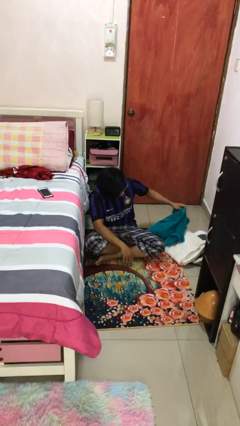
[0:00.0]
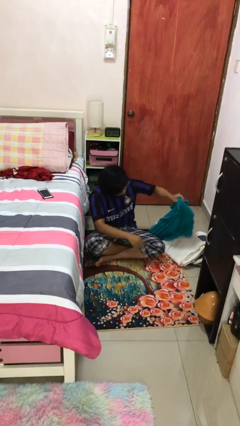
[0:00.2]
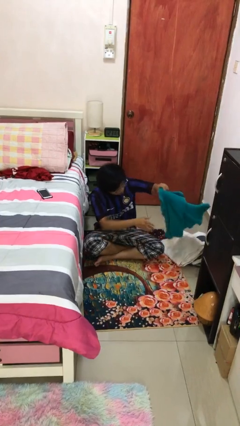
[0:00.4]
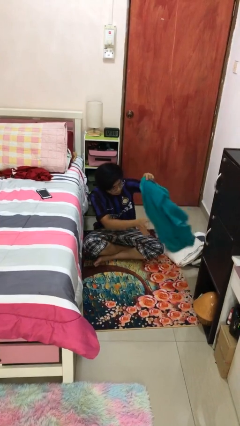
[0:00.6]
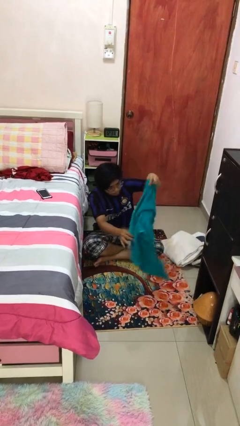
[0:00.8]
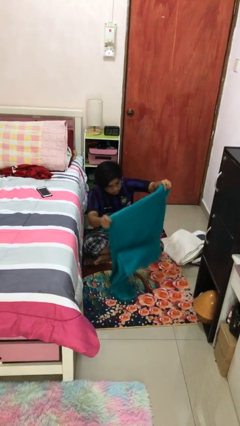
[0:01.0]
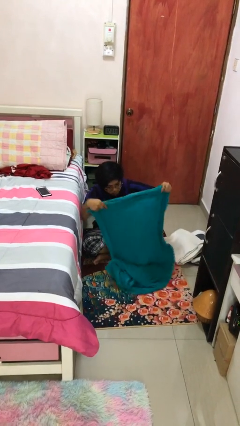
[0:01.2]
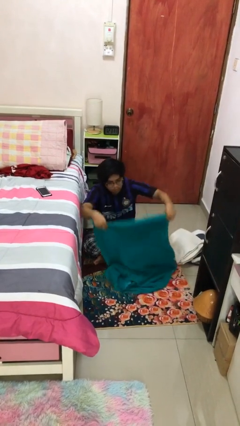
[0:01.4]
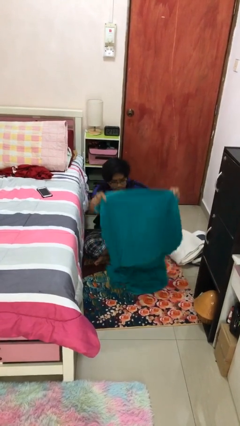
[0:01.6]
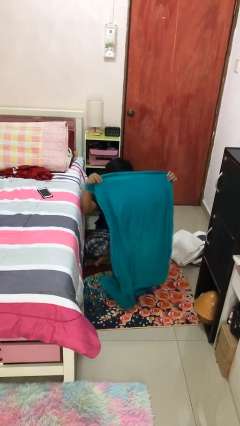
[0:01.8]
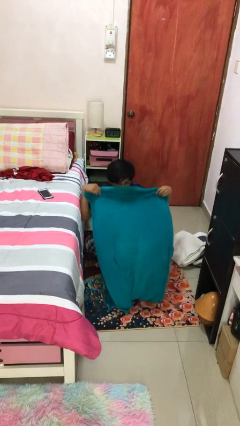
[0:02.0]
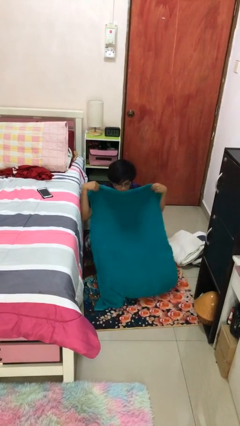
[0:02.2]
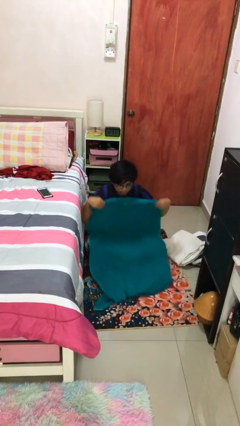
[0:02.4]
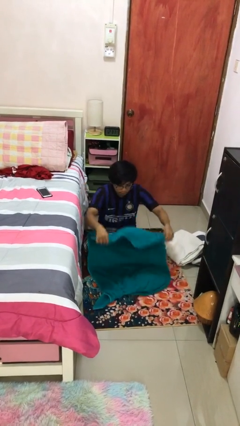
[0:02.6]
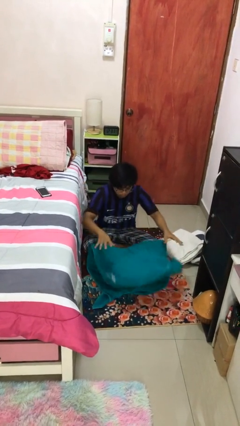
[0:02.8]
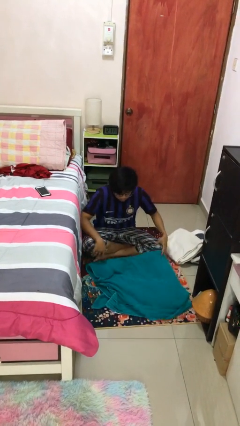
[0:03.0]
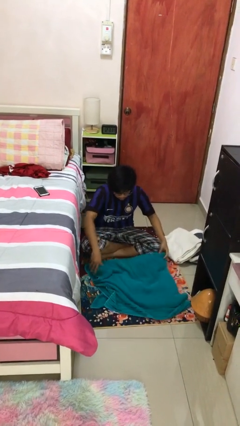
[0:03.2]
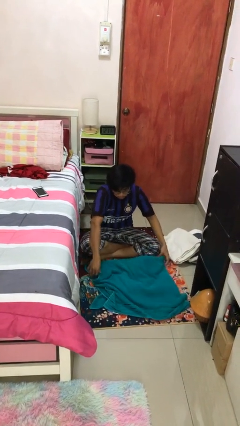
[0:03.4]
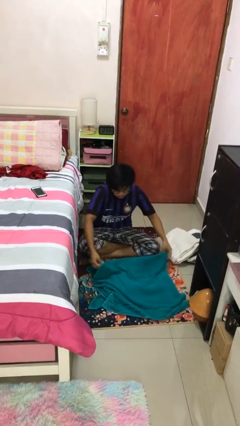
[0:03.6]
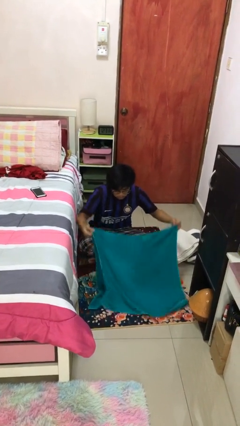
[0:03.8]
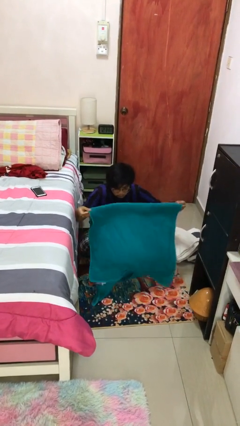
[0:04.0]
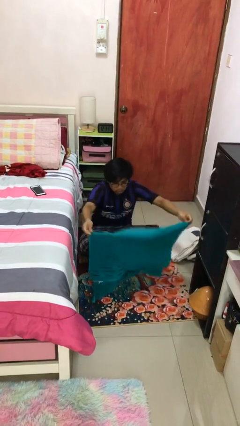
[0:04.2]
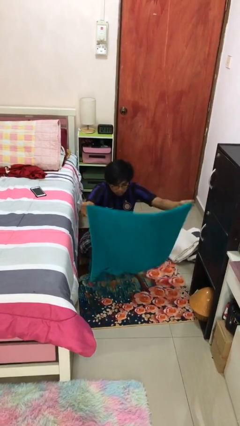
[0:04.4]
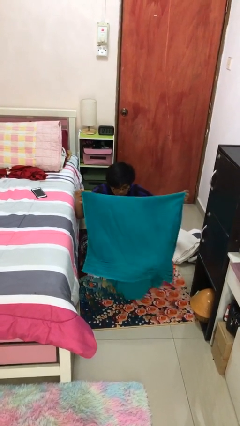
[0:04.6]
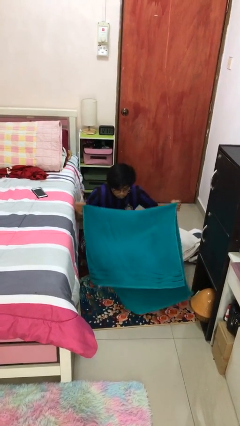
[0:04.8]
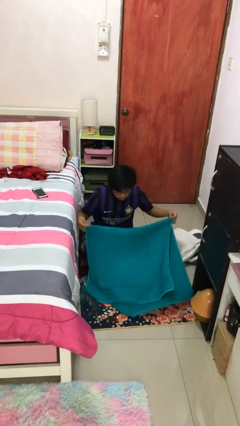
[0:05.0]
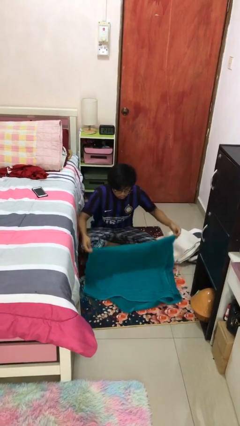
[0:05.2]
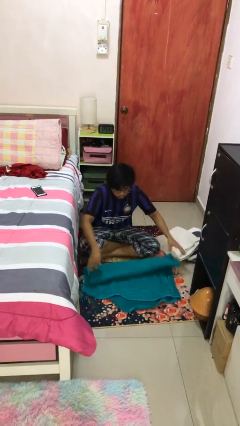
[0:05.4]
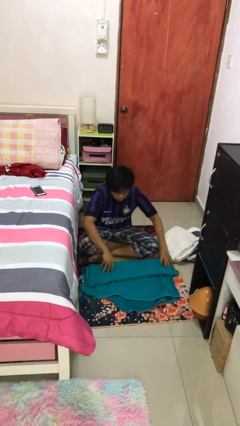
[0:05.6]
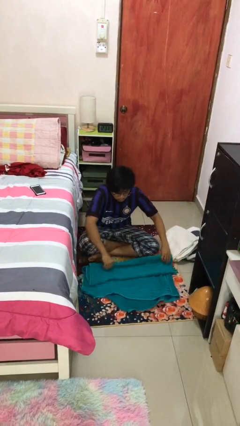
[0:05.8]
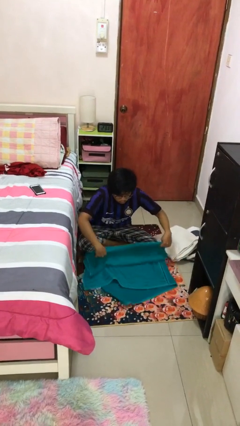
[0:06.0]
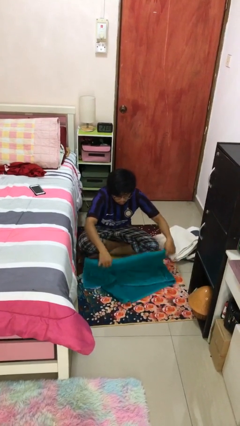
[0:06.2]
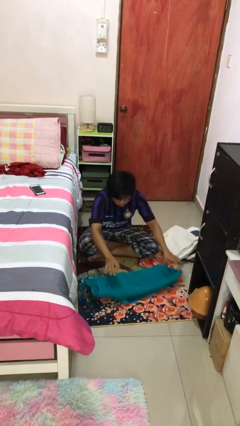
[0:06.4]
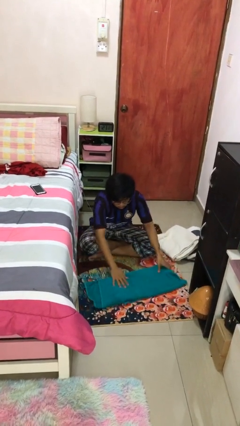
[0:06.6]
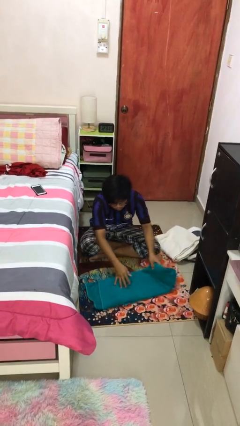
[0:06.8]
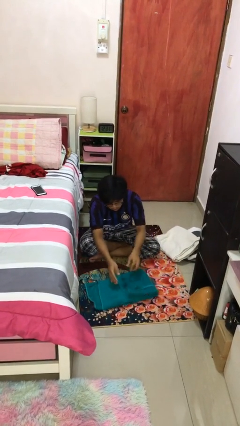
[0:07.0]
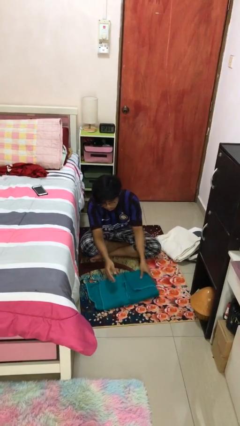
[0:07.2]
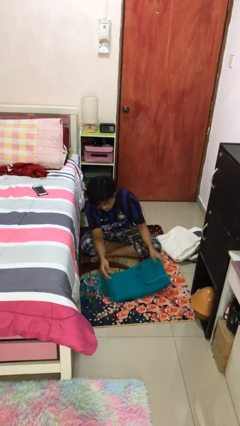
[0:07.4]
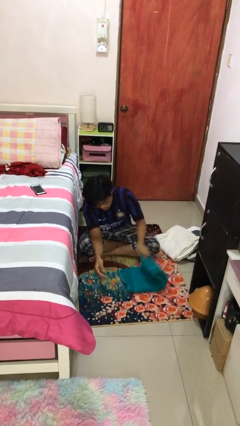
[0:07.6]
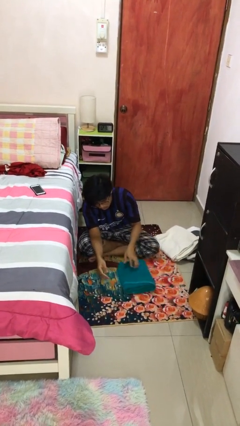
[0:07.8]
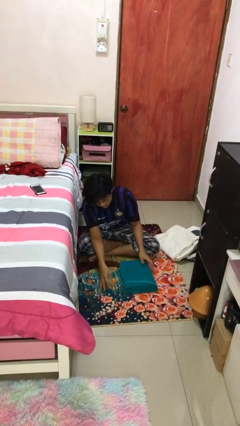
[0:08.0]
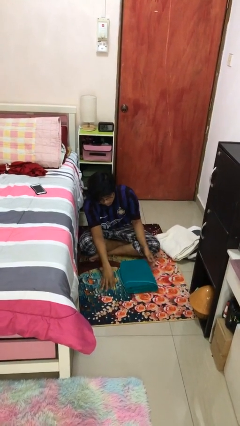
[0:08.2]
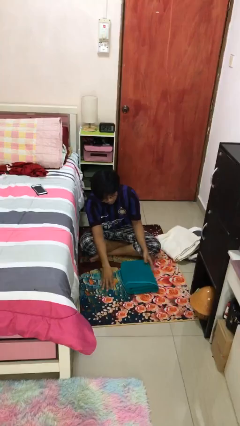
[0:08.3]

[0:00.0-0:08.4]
person folds towel

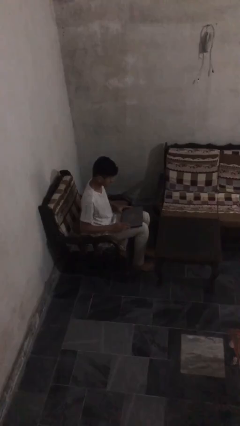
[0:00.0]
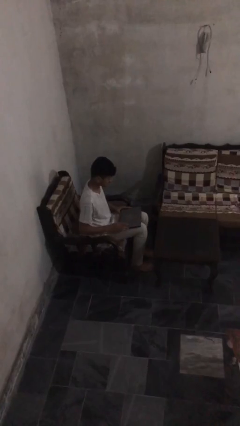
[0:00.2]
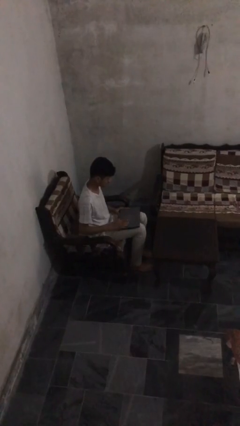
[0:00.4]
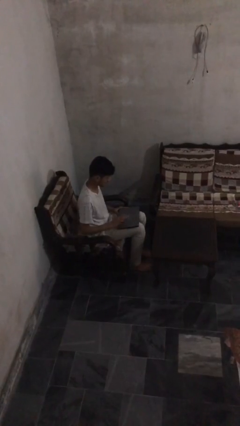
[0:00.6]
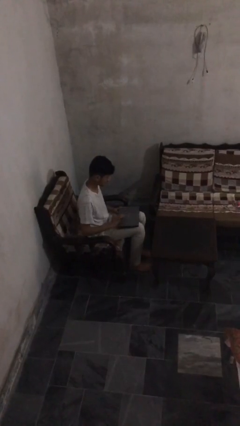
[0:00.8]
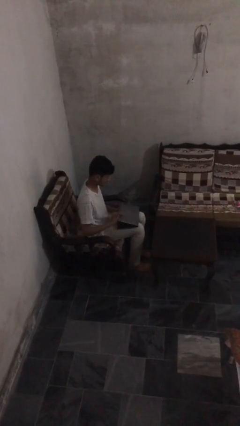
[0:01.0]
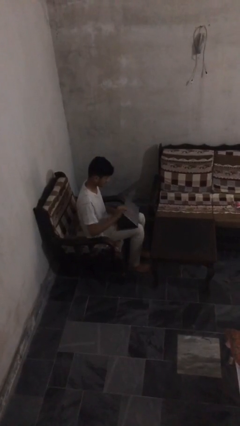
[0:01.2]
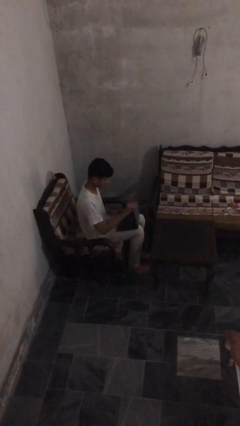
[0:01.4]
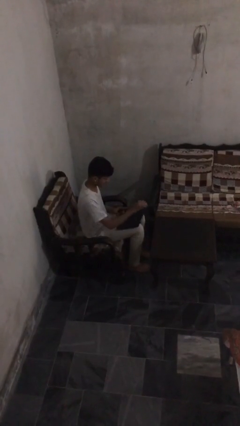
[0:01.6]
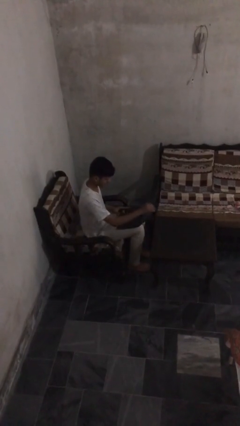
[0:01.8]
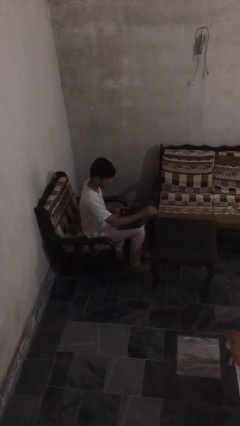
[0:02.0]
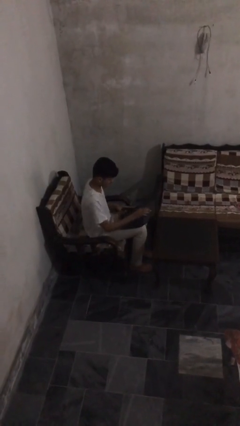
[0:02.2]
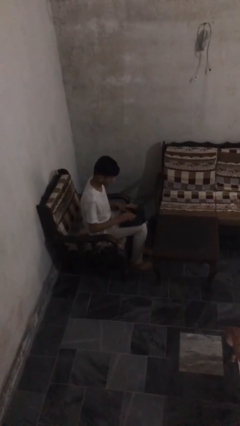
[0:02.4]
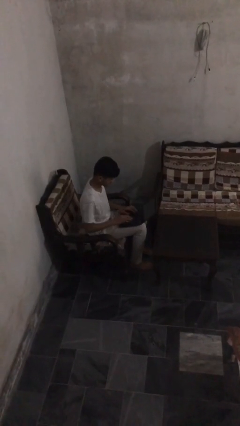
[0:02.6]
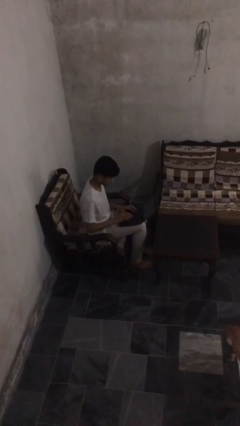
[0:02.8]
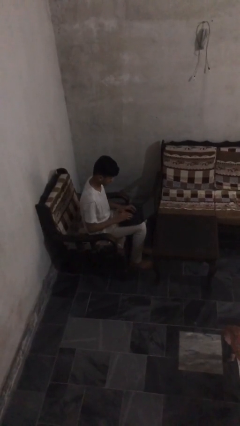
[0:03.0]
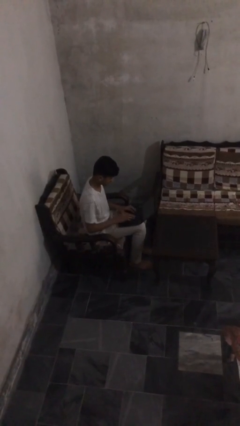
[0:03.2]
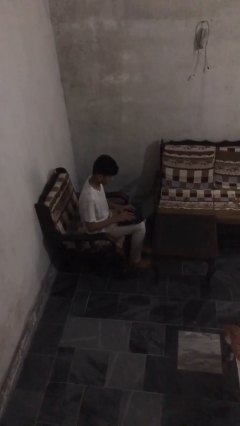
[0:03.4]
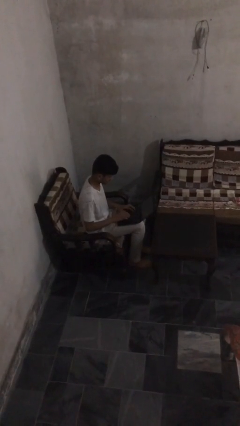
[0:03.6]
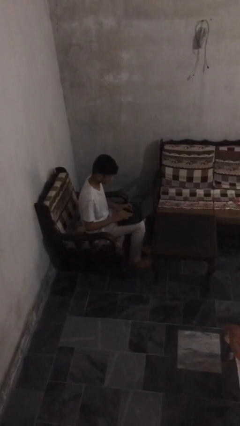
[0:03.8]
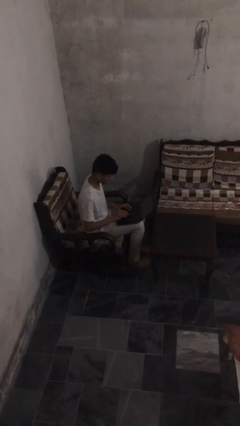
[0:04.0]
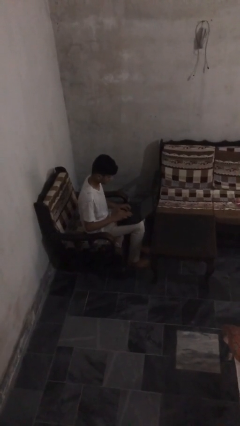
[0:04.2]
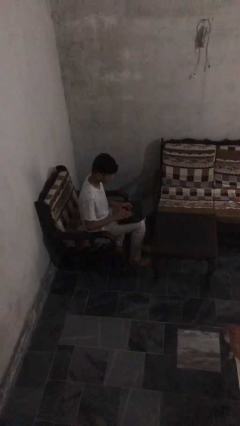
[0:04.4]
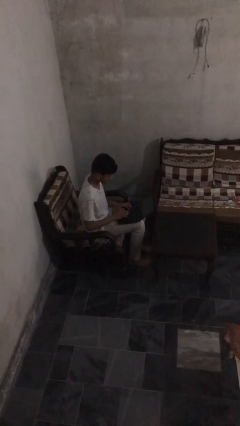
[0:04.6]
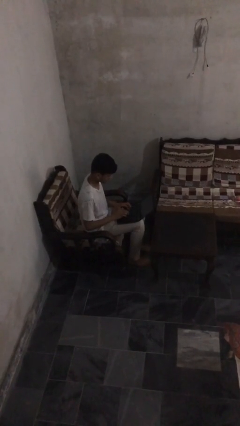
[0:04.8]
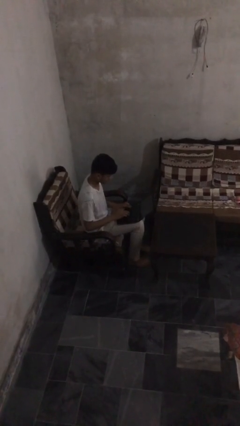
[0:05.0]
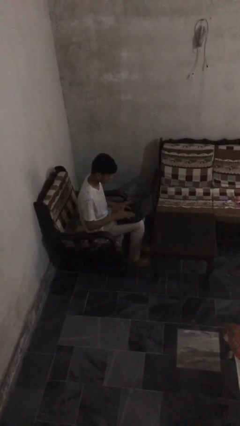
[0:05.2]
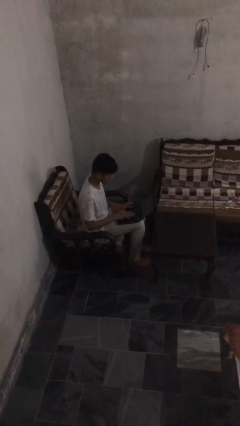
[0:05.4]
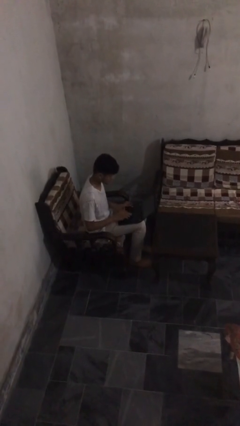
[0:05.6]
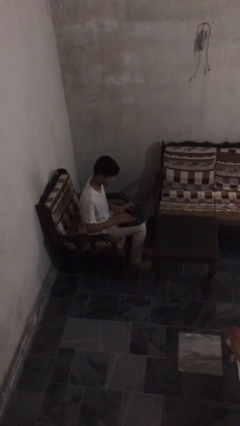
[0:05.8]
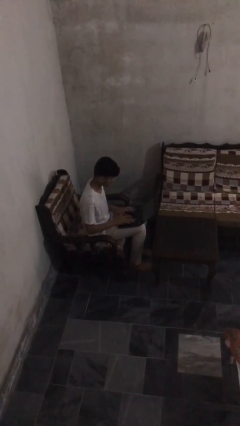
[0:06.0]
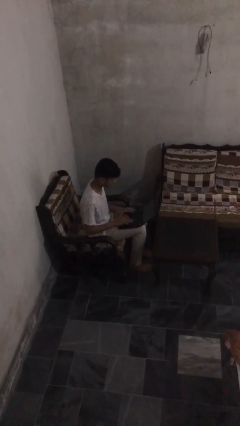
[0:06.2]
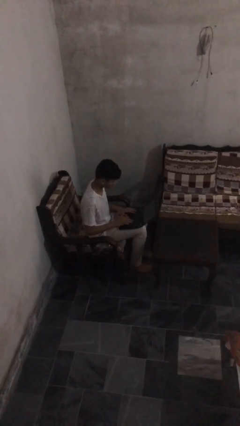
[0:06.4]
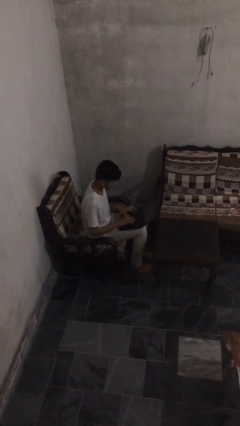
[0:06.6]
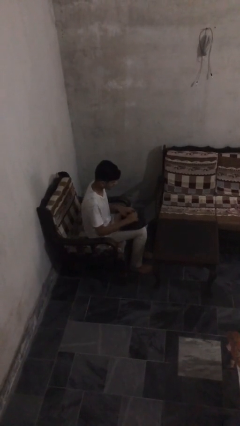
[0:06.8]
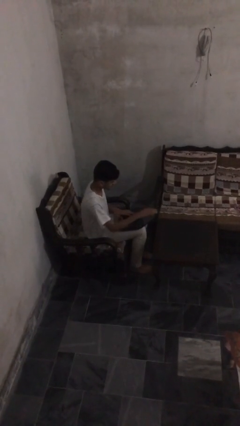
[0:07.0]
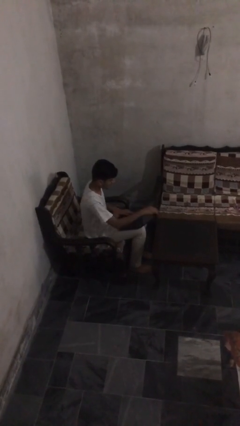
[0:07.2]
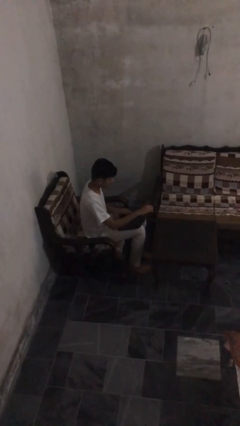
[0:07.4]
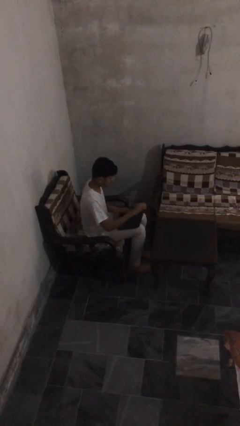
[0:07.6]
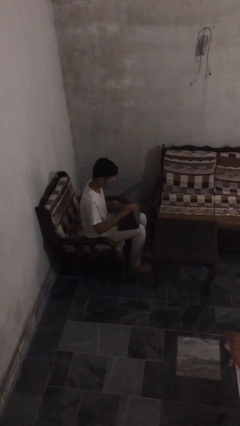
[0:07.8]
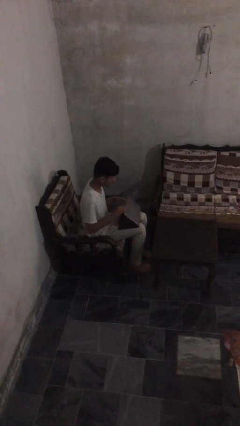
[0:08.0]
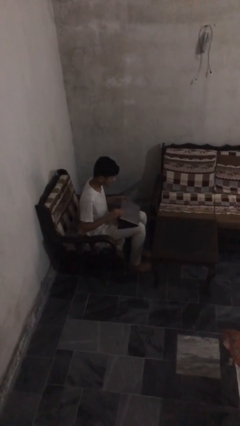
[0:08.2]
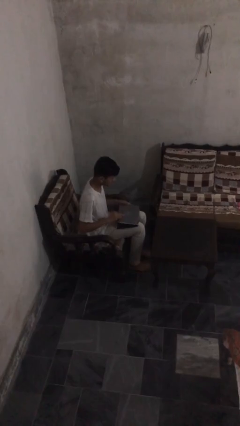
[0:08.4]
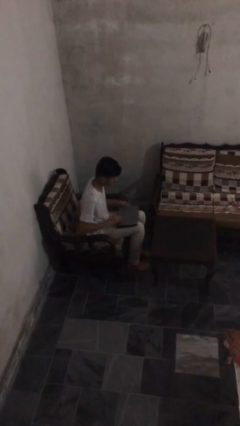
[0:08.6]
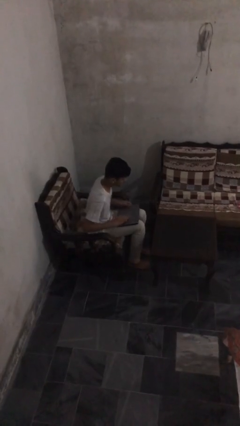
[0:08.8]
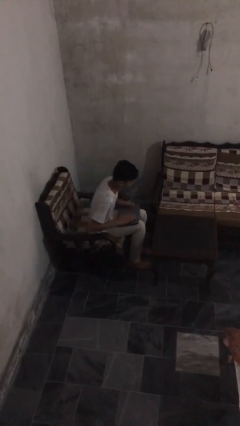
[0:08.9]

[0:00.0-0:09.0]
person interacts with laptop

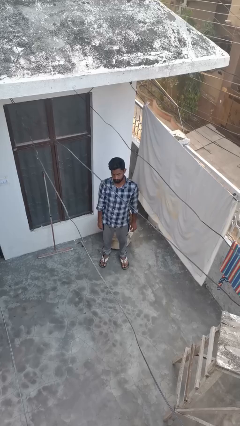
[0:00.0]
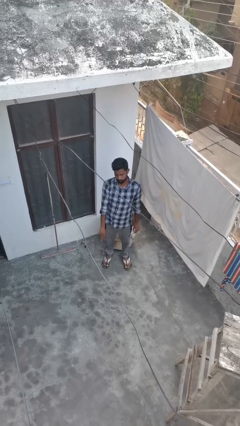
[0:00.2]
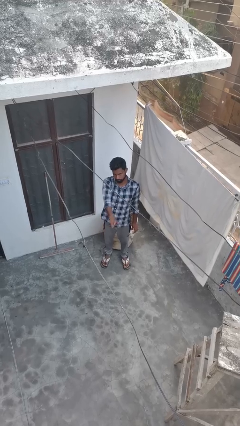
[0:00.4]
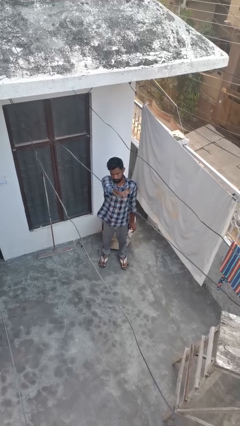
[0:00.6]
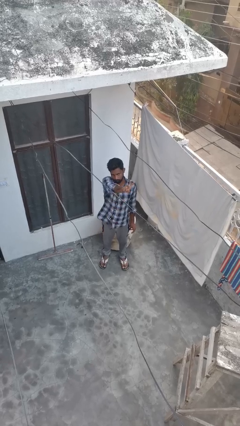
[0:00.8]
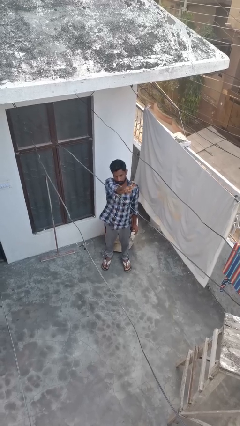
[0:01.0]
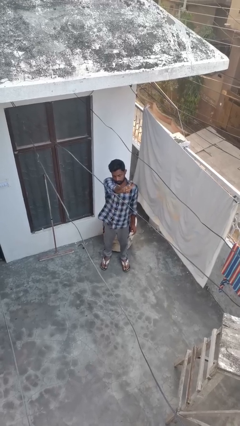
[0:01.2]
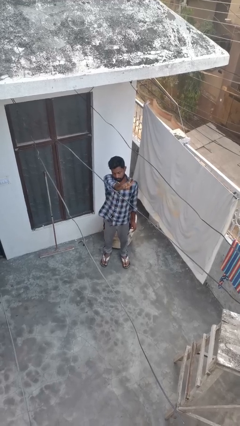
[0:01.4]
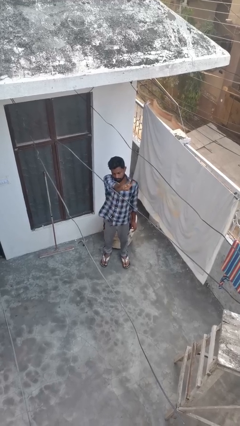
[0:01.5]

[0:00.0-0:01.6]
person gestures number three
